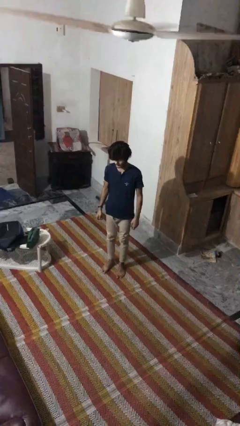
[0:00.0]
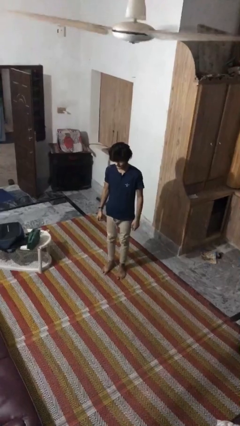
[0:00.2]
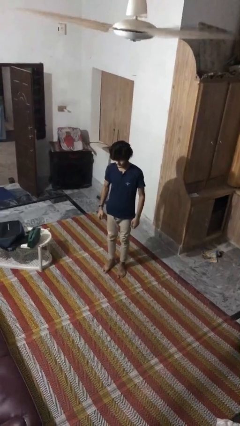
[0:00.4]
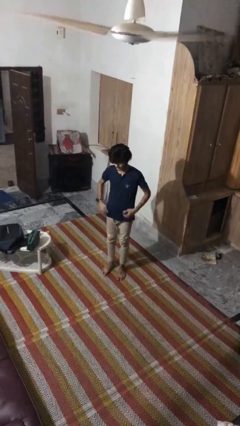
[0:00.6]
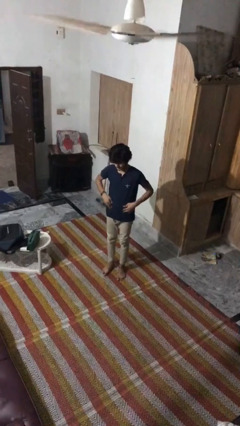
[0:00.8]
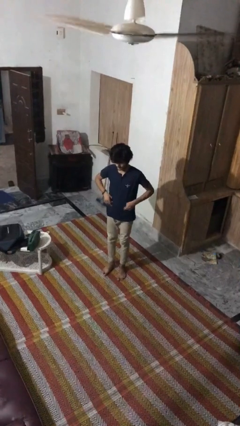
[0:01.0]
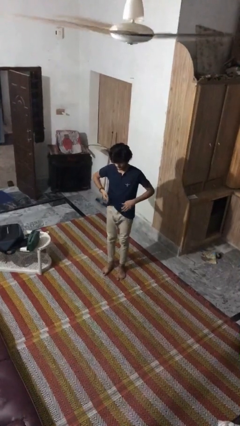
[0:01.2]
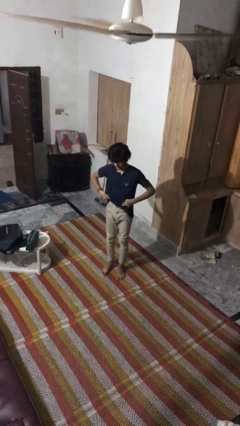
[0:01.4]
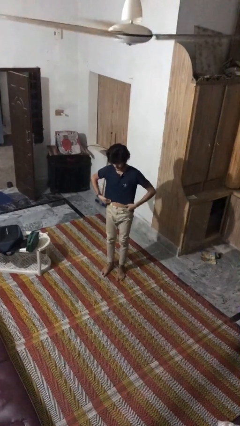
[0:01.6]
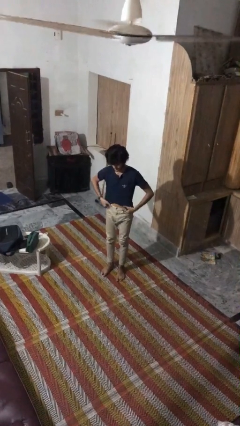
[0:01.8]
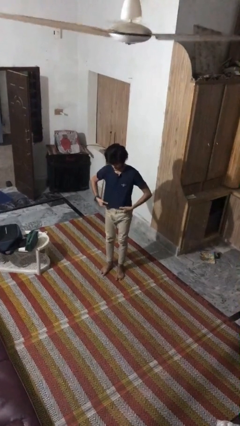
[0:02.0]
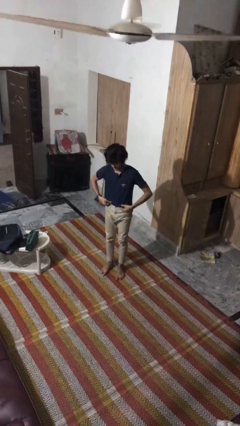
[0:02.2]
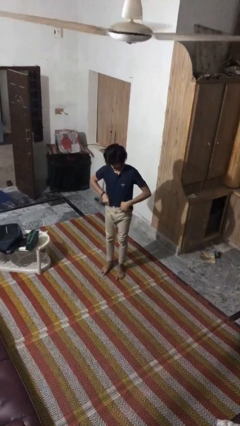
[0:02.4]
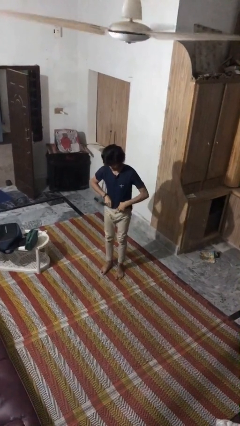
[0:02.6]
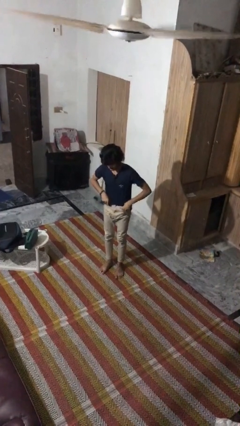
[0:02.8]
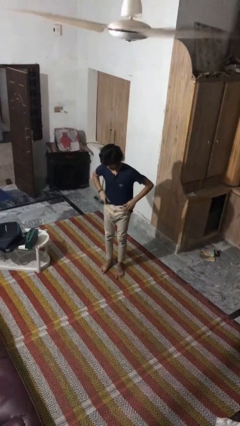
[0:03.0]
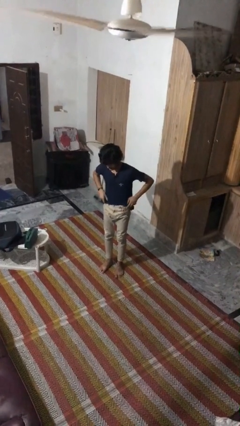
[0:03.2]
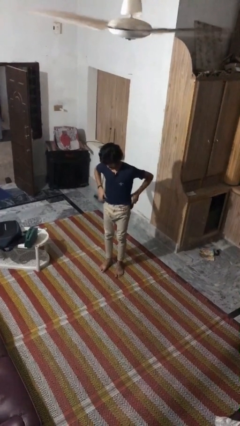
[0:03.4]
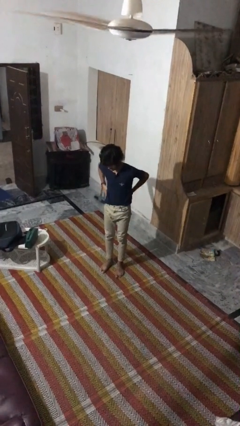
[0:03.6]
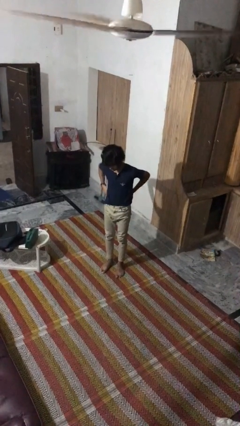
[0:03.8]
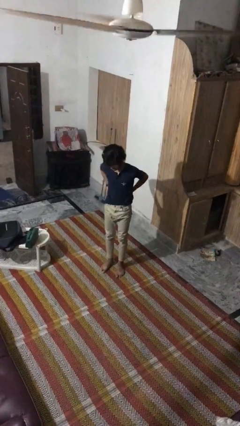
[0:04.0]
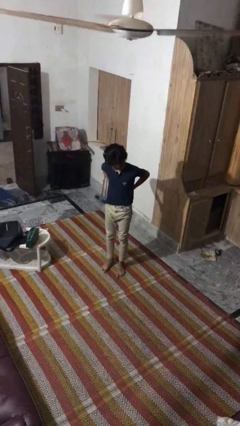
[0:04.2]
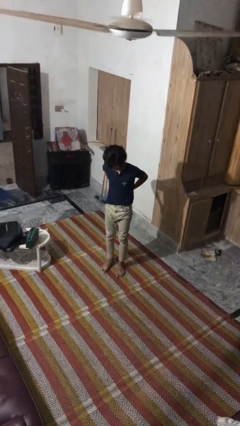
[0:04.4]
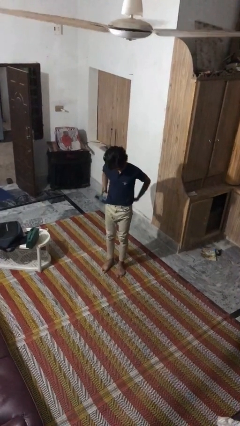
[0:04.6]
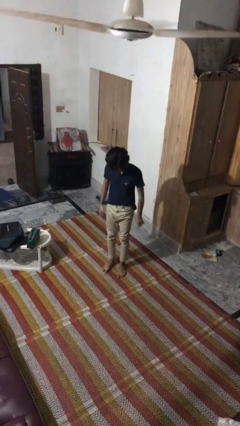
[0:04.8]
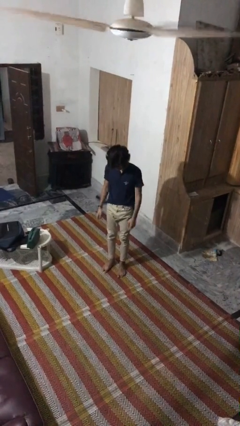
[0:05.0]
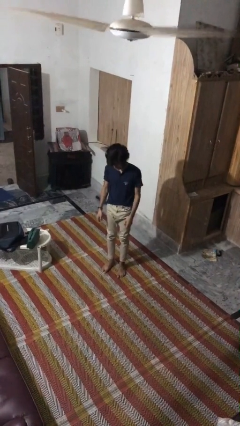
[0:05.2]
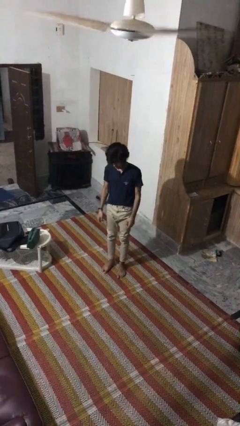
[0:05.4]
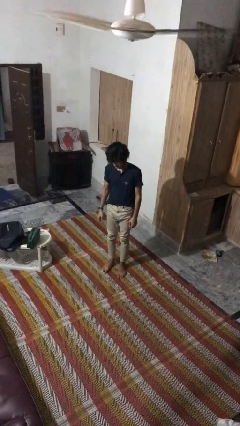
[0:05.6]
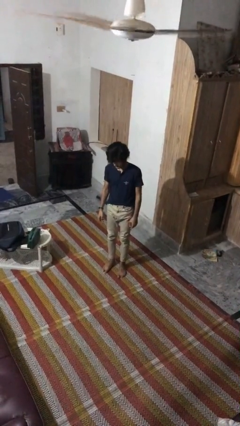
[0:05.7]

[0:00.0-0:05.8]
person tucks in shirt

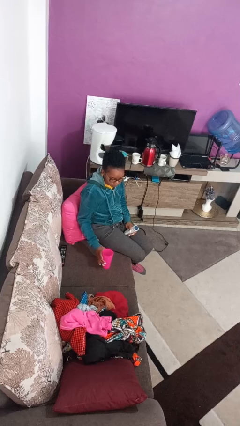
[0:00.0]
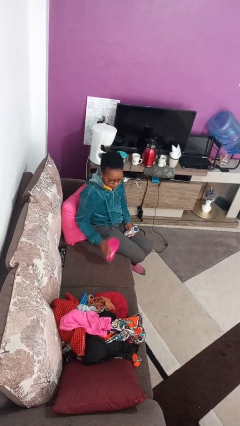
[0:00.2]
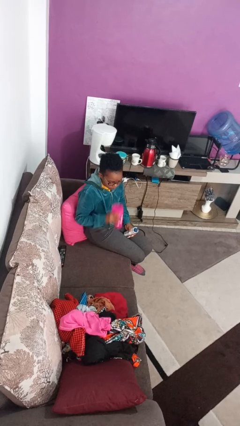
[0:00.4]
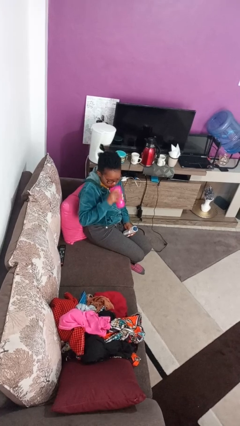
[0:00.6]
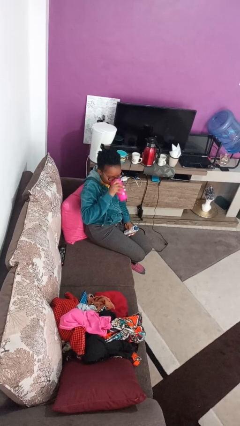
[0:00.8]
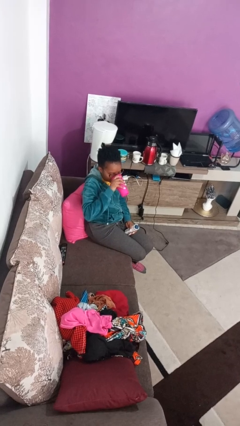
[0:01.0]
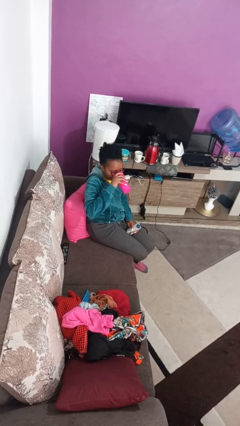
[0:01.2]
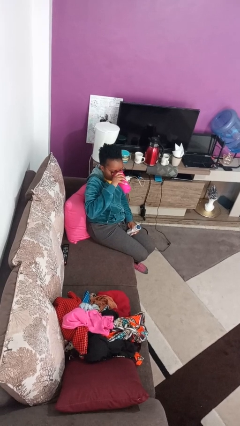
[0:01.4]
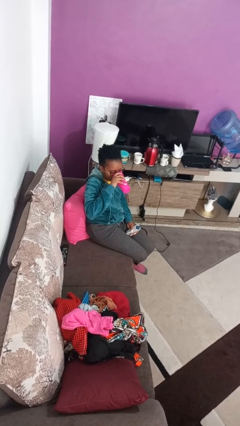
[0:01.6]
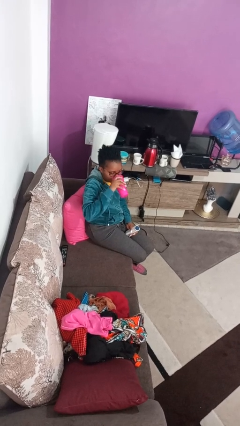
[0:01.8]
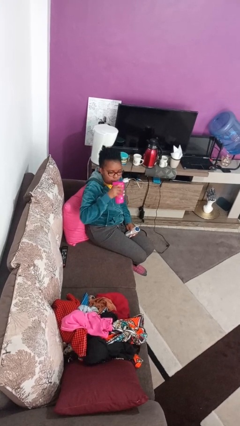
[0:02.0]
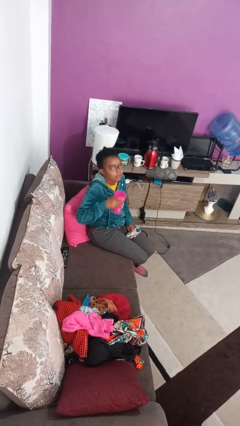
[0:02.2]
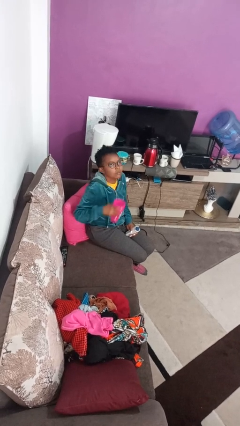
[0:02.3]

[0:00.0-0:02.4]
person drinks from cup

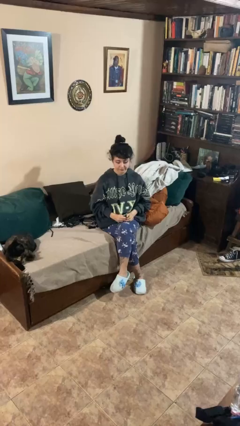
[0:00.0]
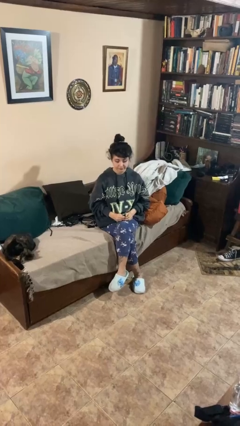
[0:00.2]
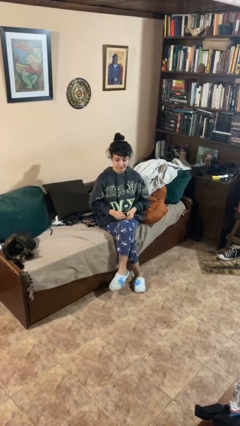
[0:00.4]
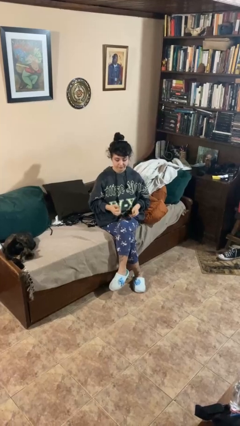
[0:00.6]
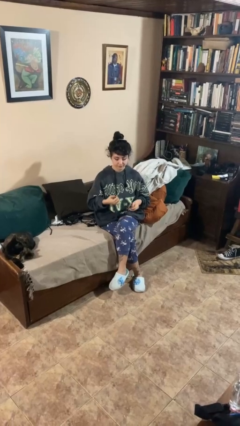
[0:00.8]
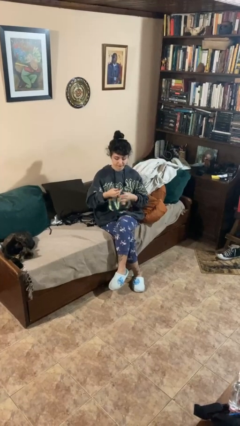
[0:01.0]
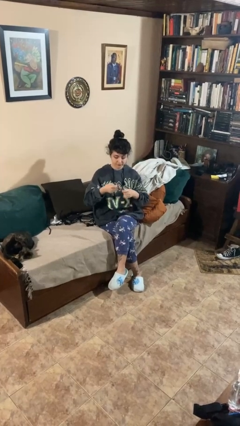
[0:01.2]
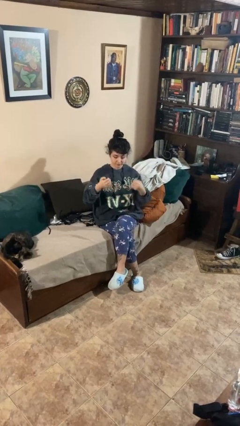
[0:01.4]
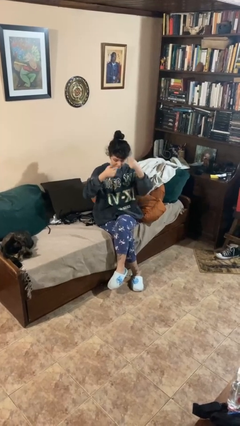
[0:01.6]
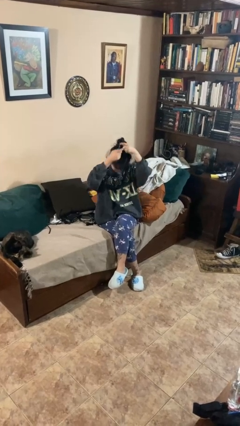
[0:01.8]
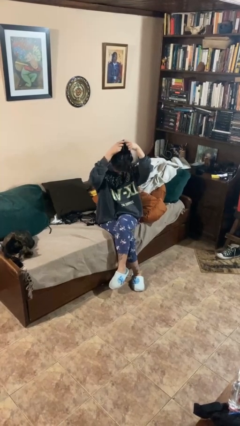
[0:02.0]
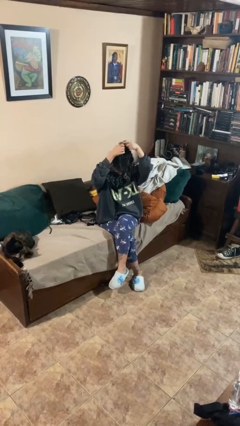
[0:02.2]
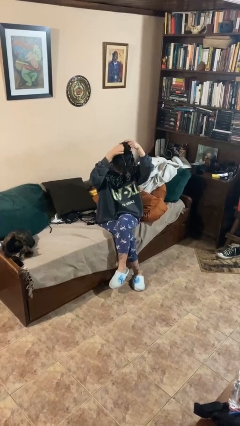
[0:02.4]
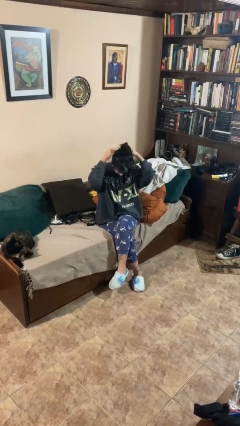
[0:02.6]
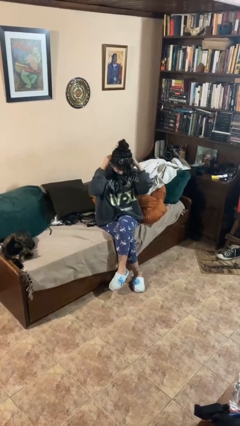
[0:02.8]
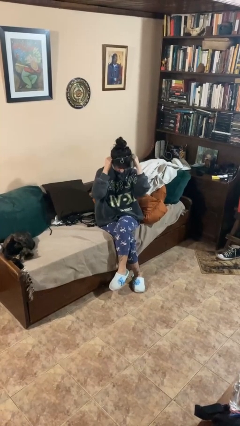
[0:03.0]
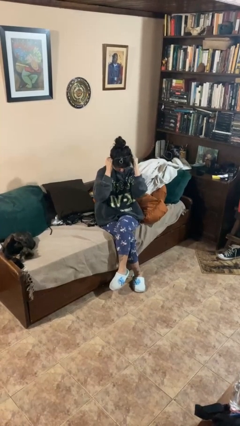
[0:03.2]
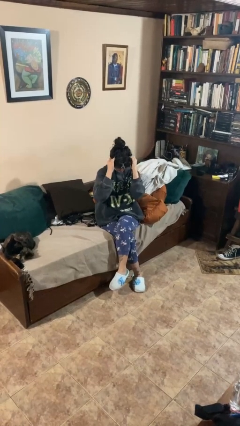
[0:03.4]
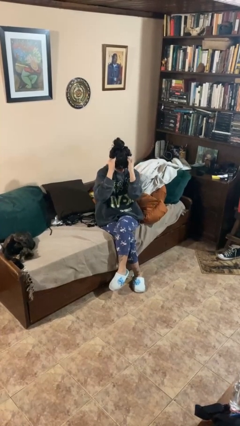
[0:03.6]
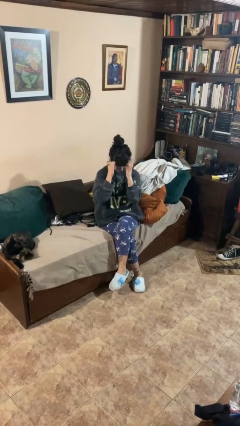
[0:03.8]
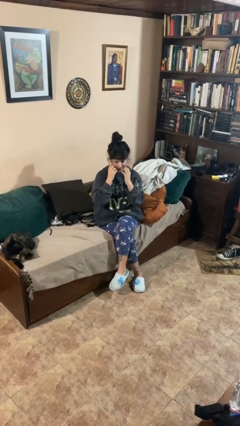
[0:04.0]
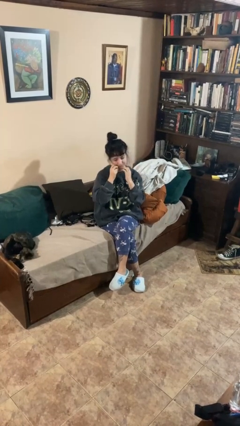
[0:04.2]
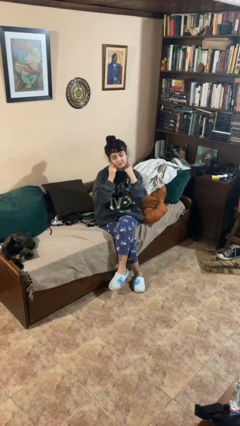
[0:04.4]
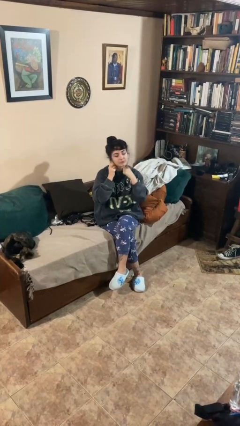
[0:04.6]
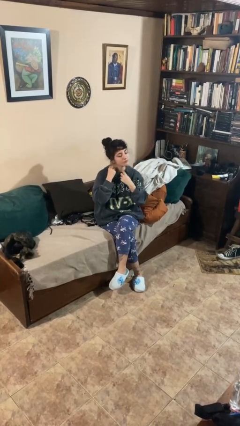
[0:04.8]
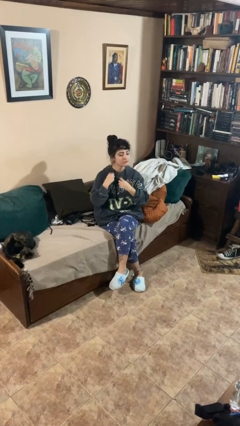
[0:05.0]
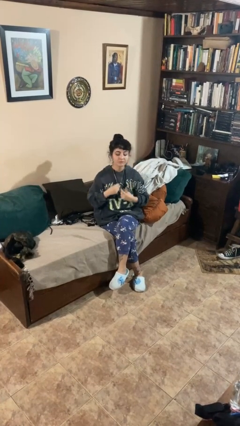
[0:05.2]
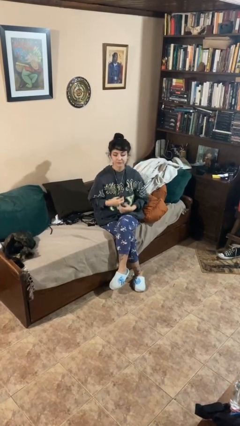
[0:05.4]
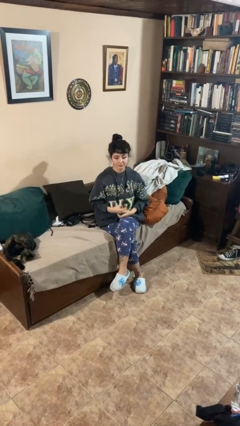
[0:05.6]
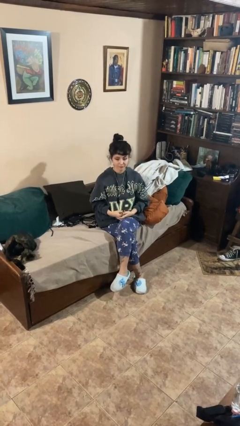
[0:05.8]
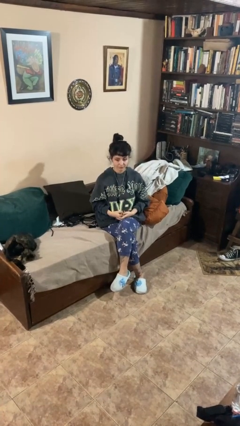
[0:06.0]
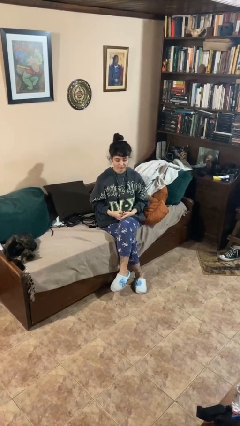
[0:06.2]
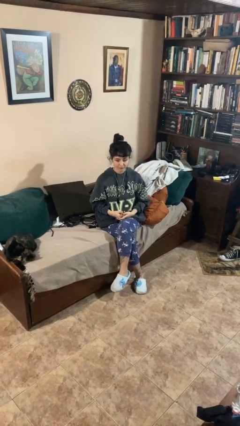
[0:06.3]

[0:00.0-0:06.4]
person puts on necklace

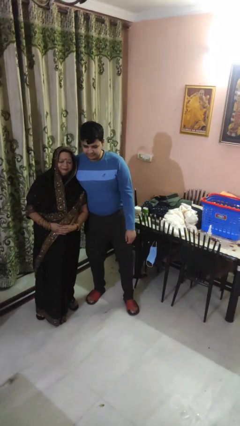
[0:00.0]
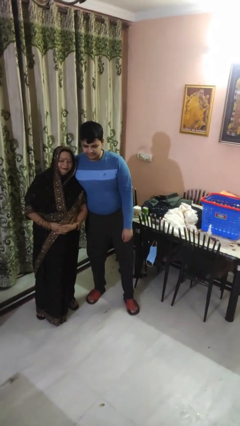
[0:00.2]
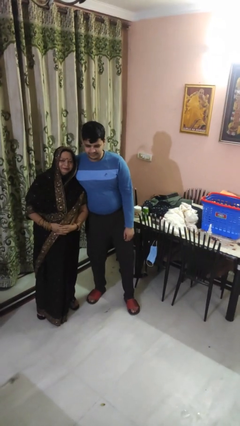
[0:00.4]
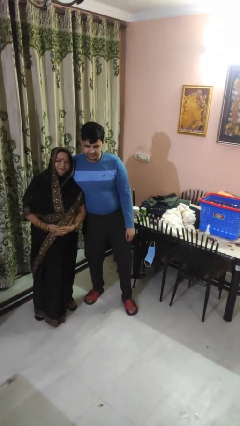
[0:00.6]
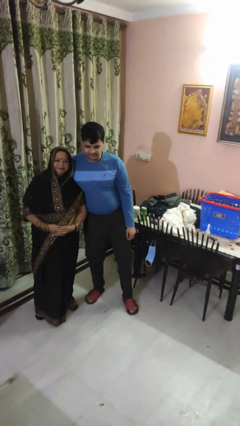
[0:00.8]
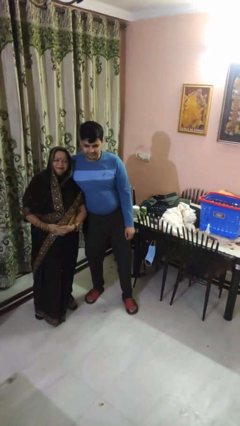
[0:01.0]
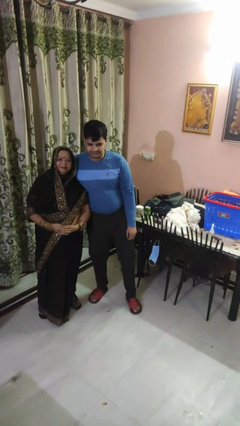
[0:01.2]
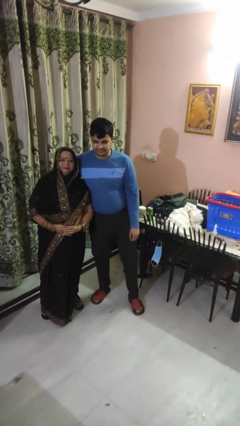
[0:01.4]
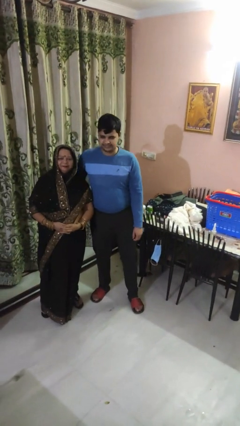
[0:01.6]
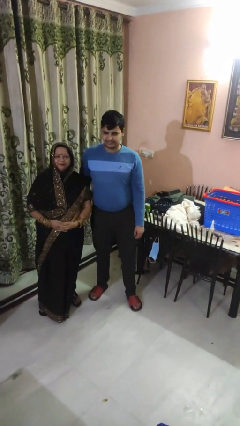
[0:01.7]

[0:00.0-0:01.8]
person hugs person from side

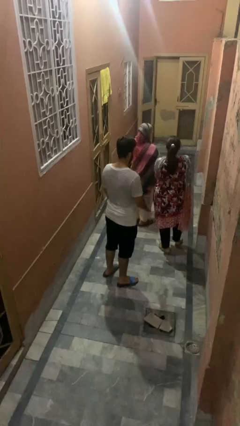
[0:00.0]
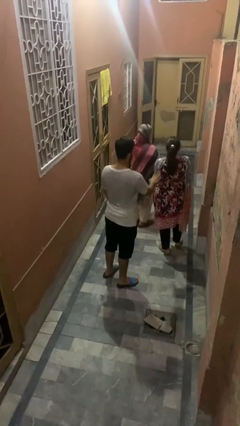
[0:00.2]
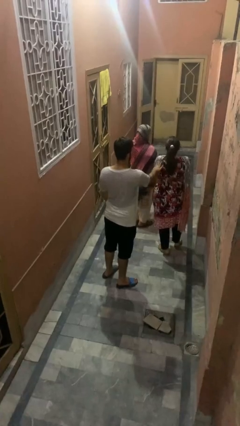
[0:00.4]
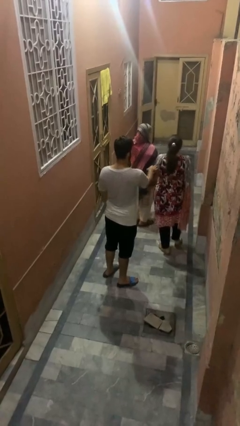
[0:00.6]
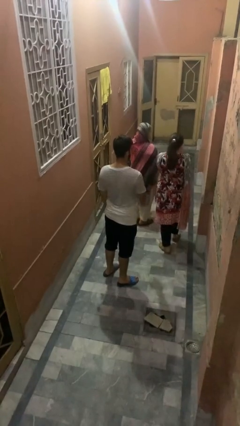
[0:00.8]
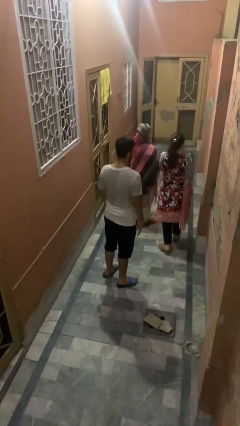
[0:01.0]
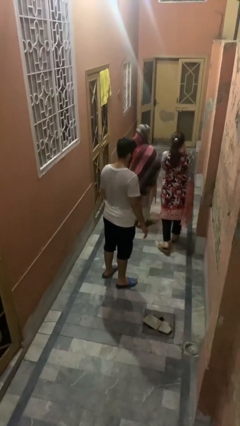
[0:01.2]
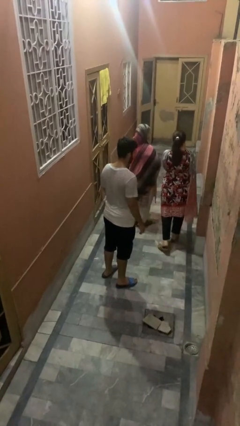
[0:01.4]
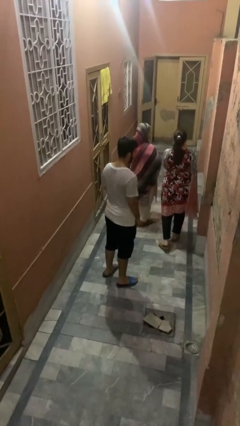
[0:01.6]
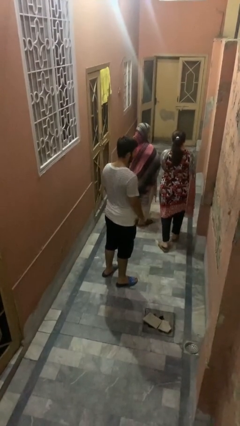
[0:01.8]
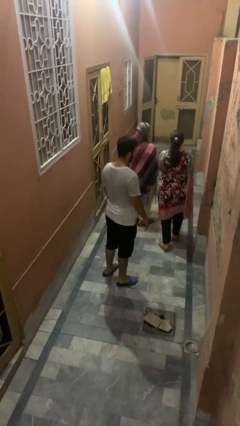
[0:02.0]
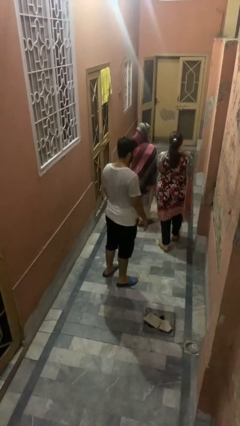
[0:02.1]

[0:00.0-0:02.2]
person shoves person
